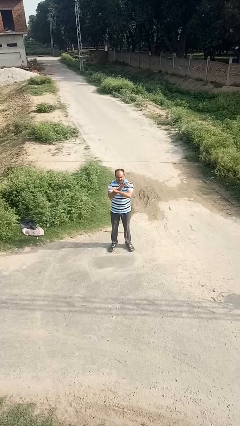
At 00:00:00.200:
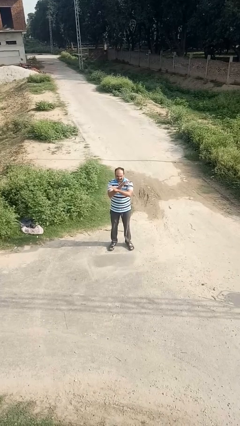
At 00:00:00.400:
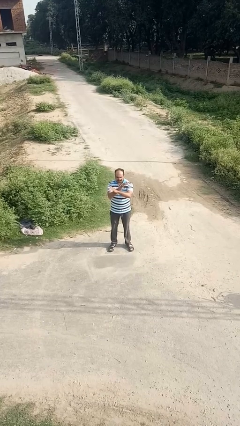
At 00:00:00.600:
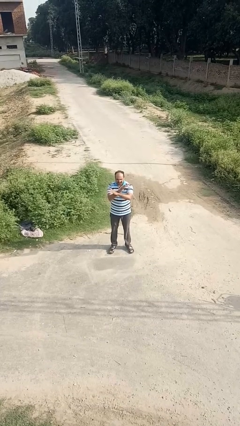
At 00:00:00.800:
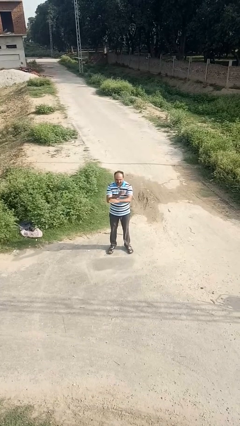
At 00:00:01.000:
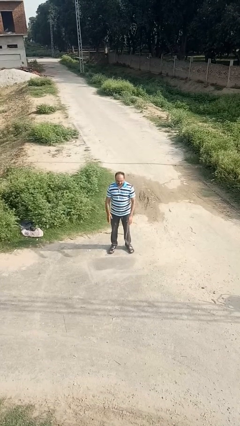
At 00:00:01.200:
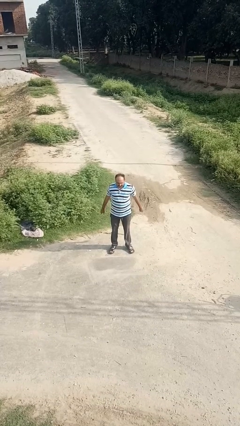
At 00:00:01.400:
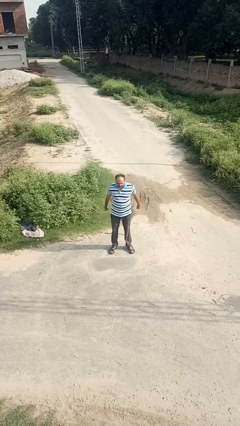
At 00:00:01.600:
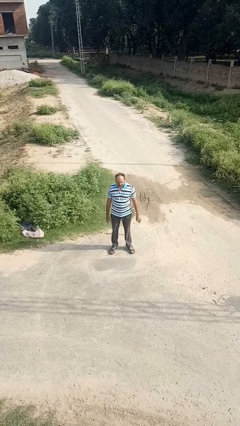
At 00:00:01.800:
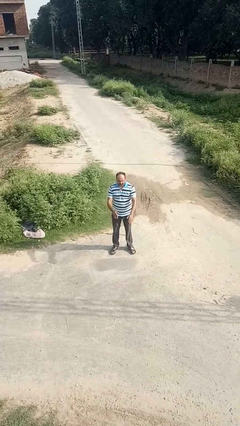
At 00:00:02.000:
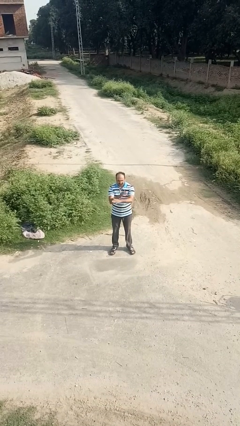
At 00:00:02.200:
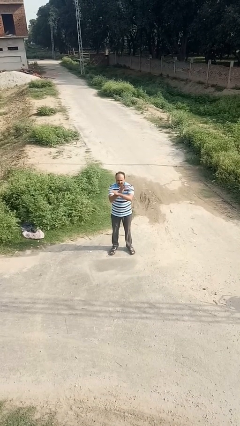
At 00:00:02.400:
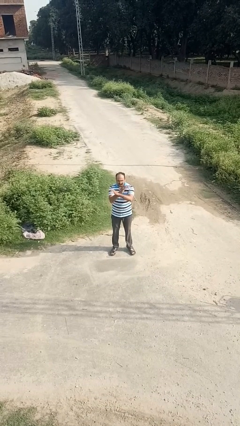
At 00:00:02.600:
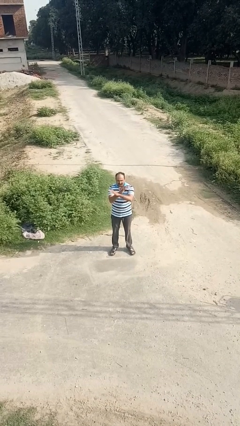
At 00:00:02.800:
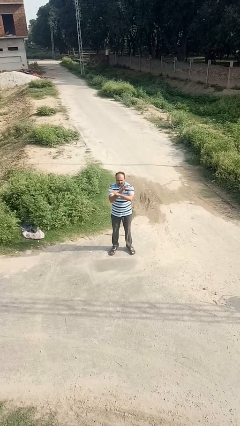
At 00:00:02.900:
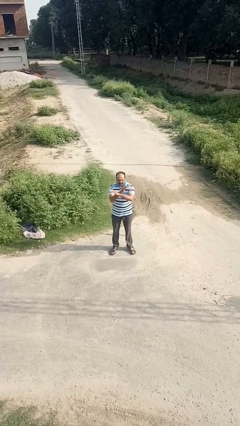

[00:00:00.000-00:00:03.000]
person crosses arms

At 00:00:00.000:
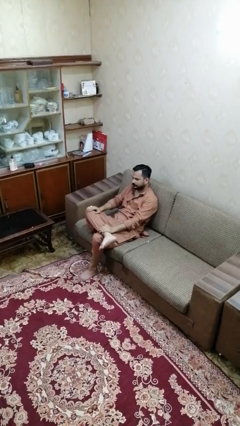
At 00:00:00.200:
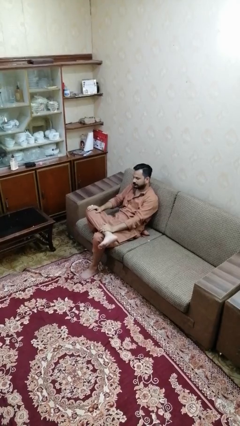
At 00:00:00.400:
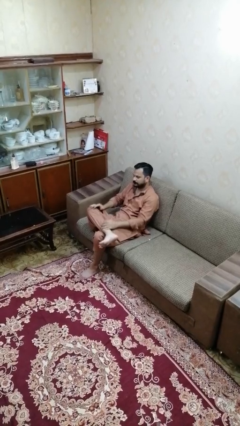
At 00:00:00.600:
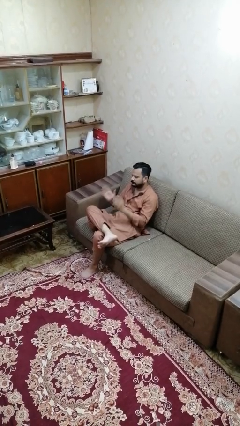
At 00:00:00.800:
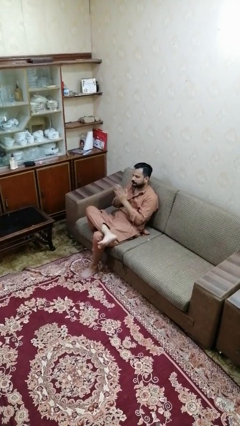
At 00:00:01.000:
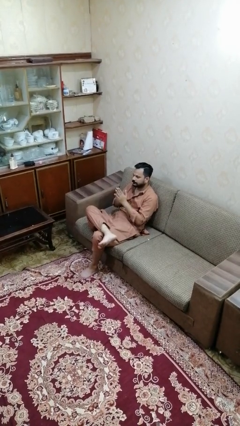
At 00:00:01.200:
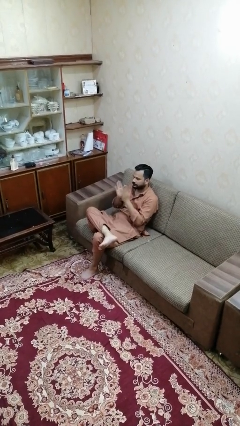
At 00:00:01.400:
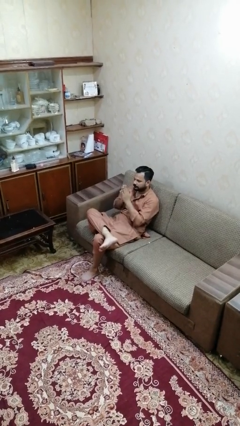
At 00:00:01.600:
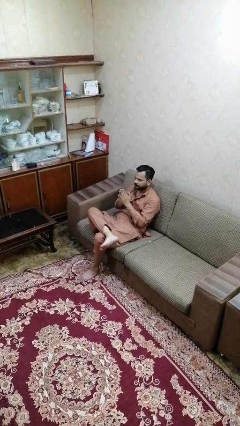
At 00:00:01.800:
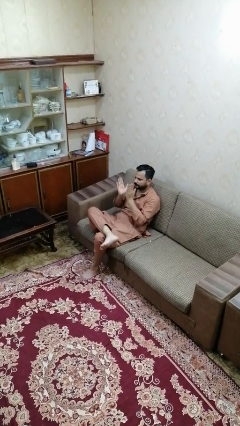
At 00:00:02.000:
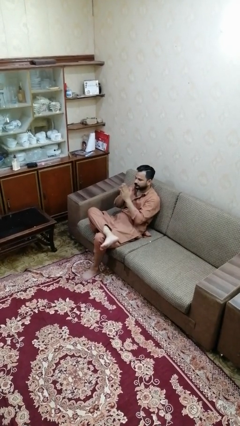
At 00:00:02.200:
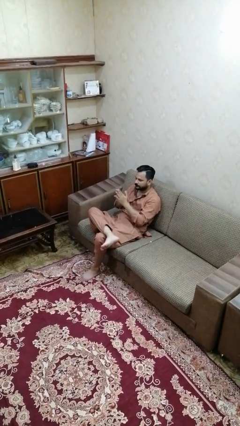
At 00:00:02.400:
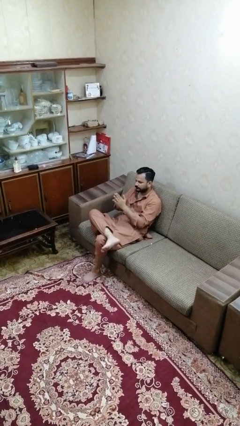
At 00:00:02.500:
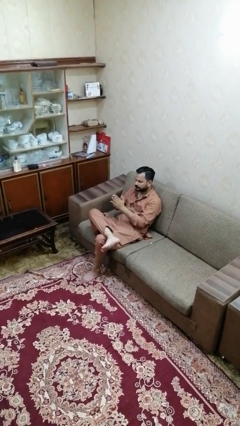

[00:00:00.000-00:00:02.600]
person claps hands

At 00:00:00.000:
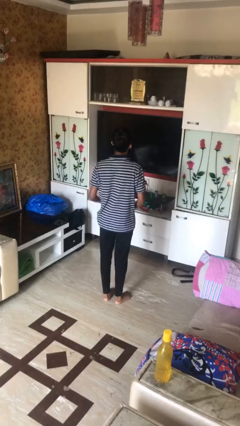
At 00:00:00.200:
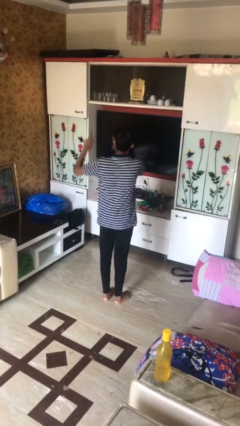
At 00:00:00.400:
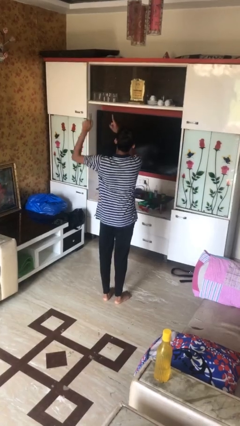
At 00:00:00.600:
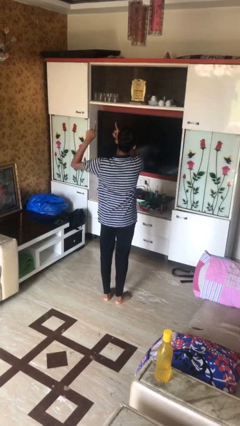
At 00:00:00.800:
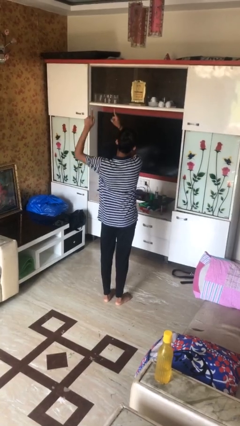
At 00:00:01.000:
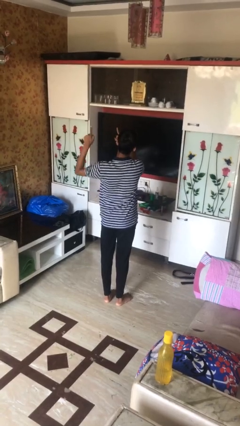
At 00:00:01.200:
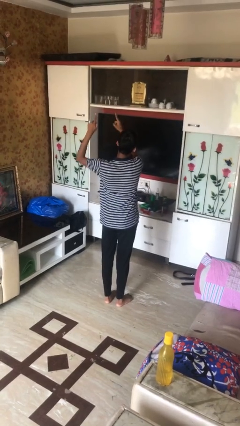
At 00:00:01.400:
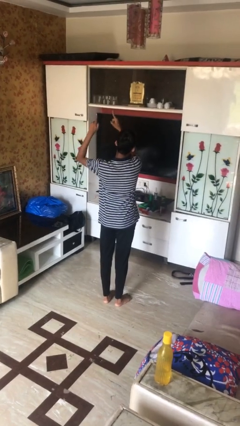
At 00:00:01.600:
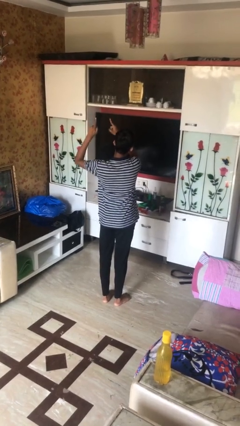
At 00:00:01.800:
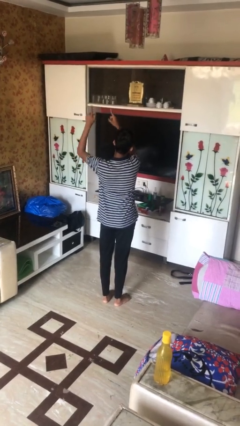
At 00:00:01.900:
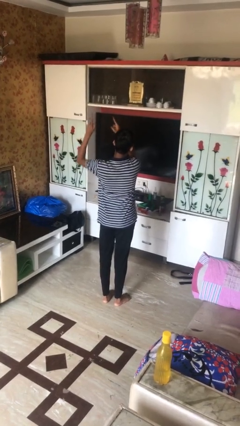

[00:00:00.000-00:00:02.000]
person dances in place

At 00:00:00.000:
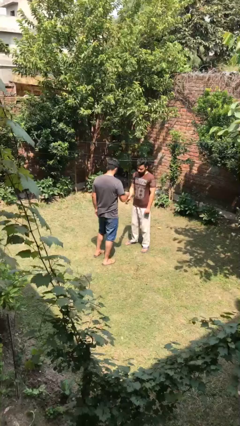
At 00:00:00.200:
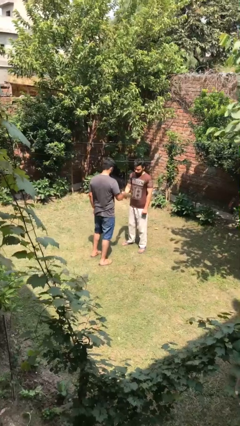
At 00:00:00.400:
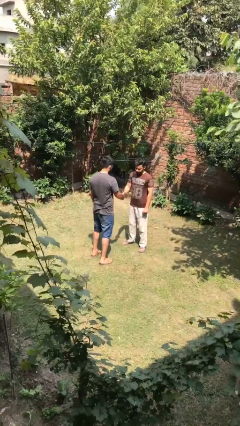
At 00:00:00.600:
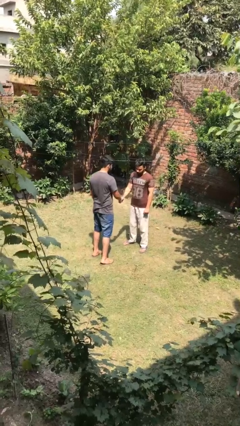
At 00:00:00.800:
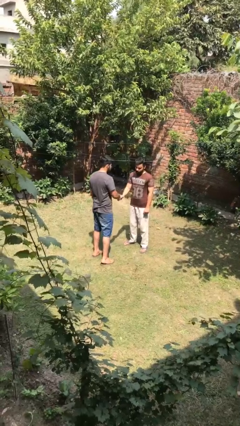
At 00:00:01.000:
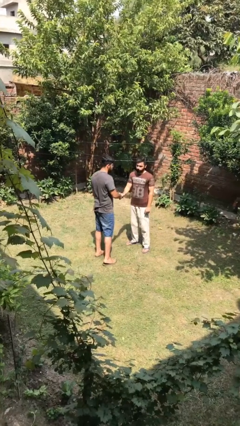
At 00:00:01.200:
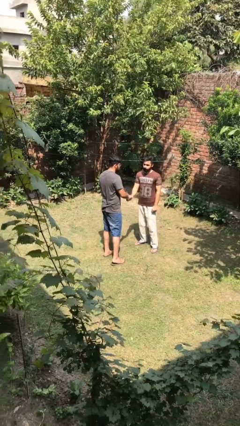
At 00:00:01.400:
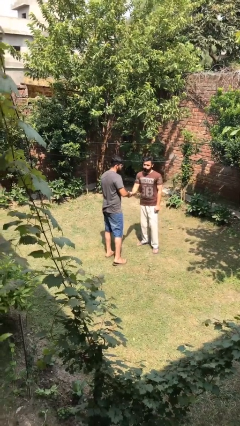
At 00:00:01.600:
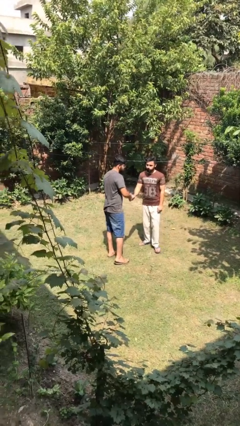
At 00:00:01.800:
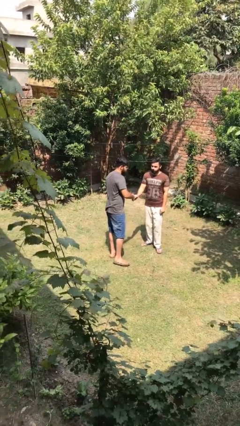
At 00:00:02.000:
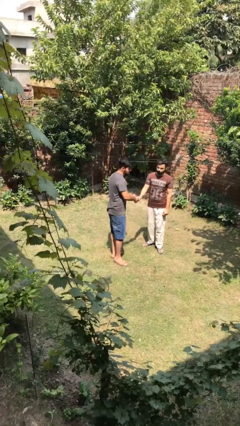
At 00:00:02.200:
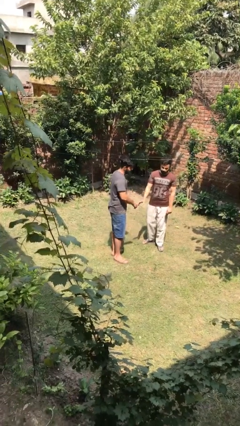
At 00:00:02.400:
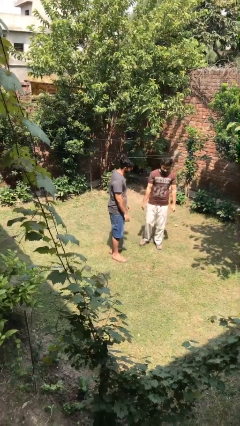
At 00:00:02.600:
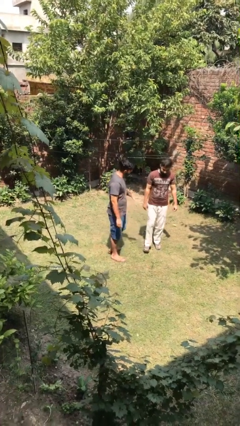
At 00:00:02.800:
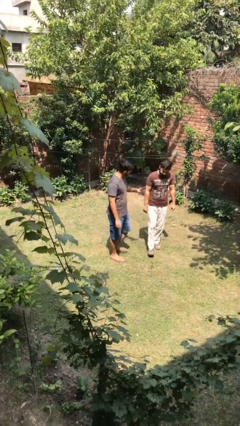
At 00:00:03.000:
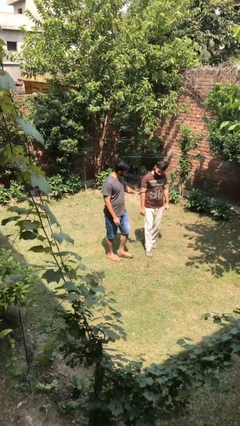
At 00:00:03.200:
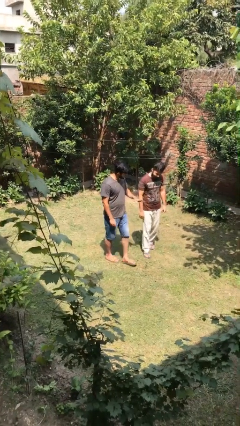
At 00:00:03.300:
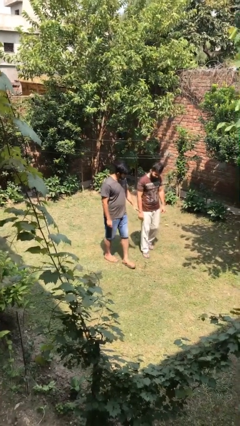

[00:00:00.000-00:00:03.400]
person shakes hand

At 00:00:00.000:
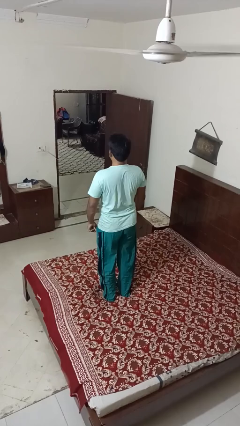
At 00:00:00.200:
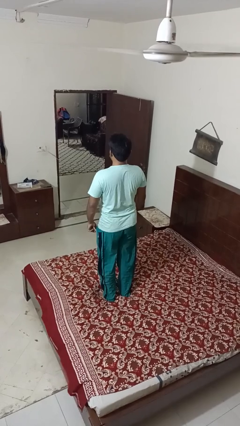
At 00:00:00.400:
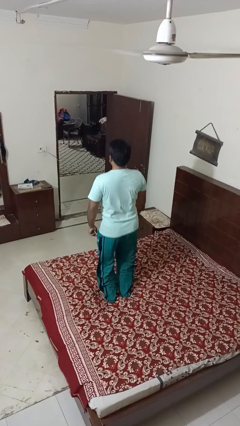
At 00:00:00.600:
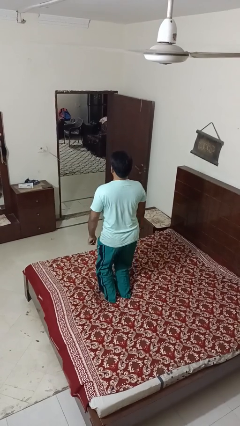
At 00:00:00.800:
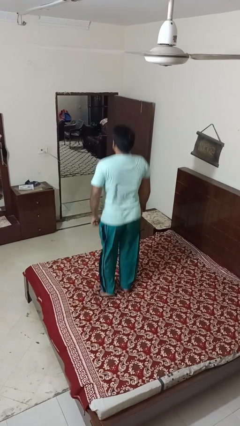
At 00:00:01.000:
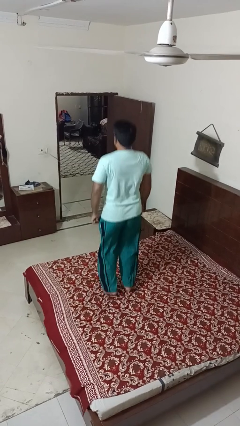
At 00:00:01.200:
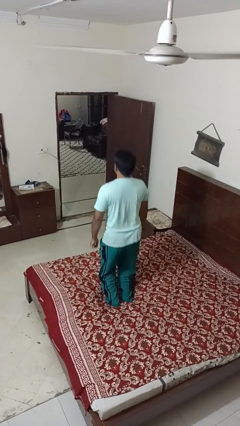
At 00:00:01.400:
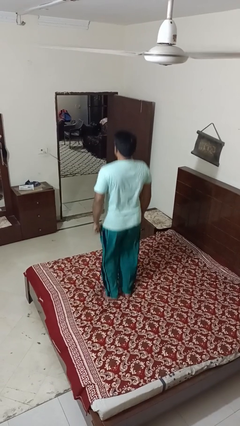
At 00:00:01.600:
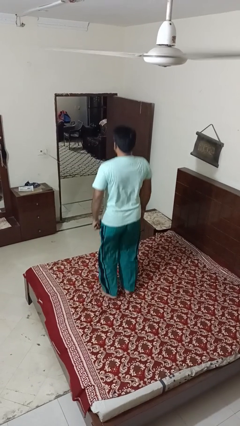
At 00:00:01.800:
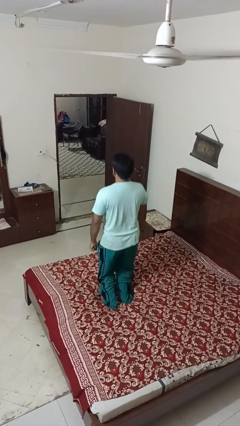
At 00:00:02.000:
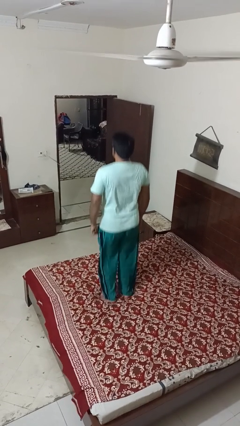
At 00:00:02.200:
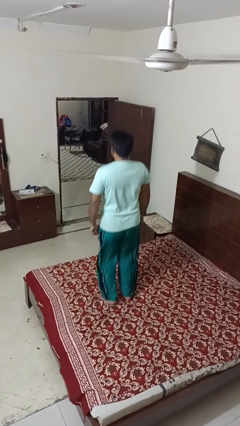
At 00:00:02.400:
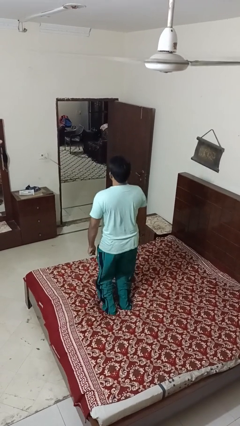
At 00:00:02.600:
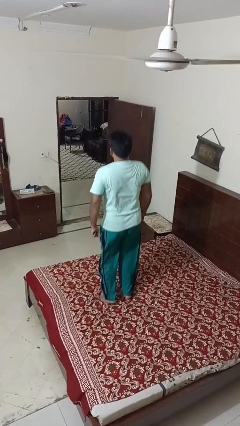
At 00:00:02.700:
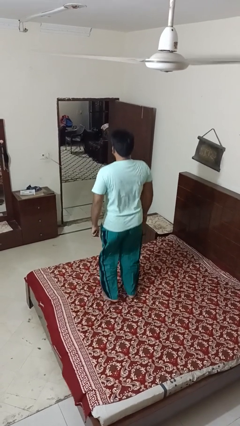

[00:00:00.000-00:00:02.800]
person jumps on bed

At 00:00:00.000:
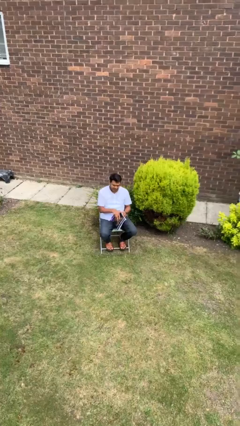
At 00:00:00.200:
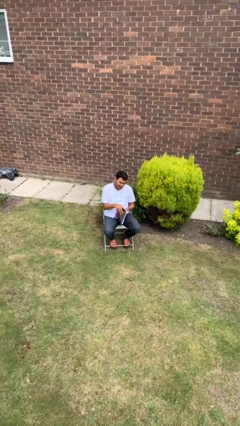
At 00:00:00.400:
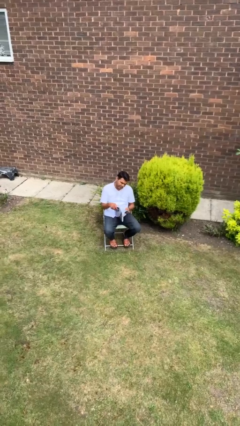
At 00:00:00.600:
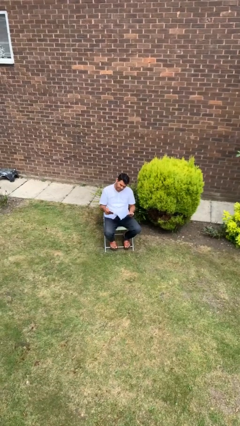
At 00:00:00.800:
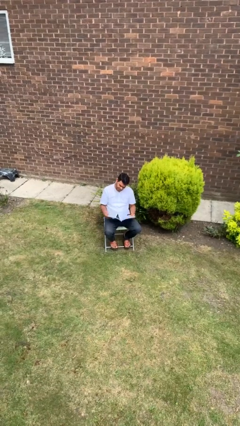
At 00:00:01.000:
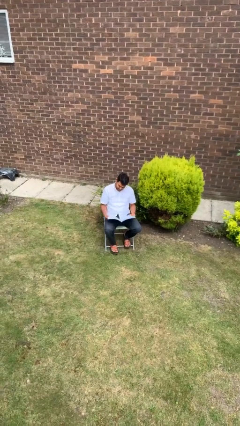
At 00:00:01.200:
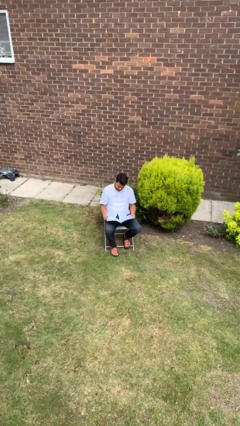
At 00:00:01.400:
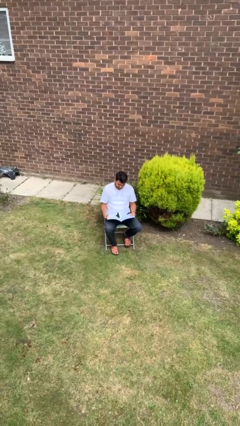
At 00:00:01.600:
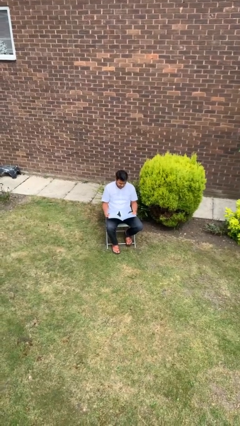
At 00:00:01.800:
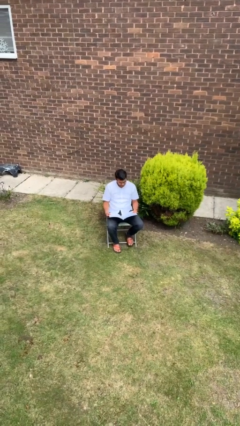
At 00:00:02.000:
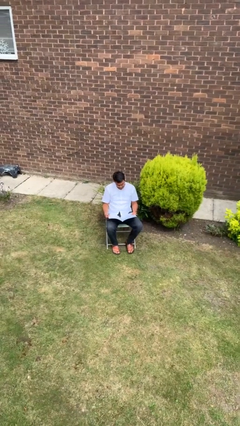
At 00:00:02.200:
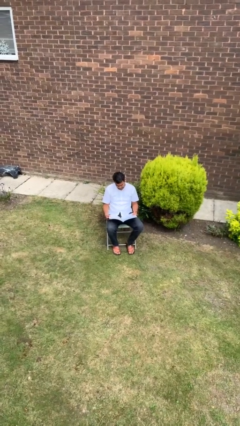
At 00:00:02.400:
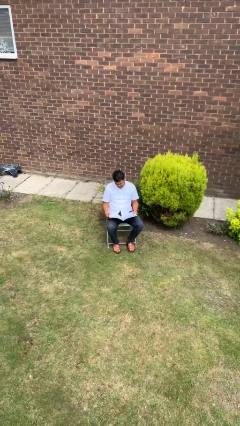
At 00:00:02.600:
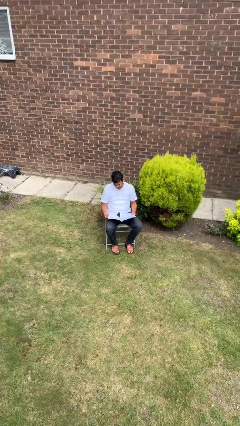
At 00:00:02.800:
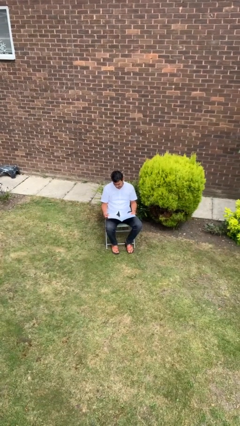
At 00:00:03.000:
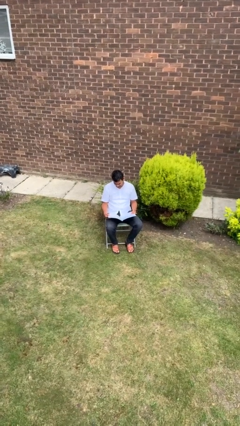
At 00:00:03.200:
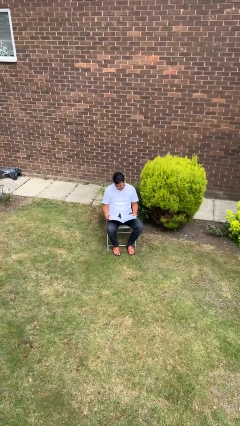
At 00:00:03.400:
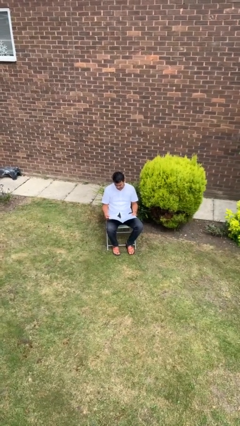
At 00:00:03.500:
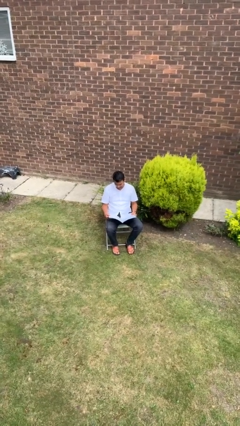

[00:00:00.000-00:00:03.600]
person reads magazine
